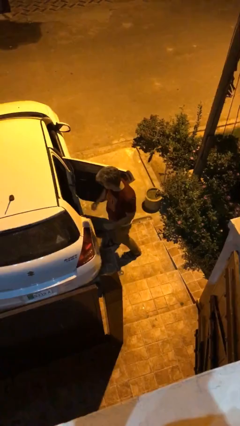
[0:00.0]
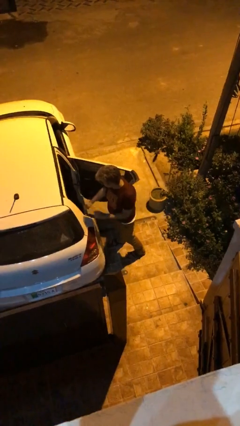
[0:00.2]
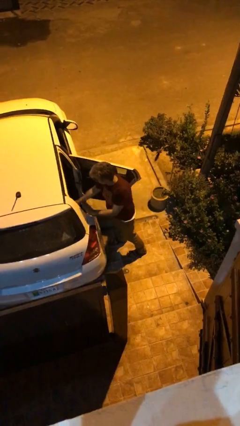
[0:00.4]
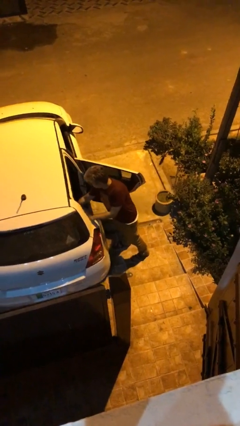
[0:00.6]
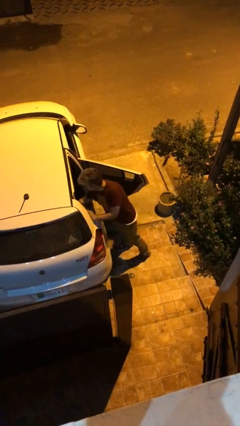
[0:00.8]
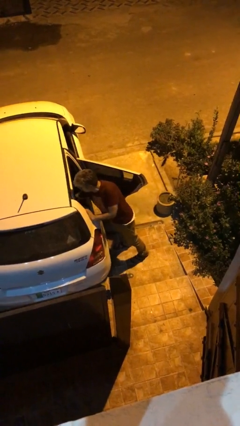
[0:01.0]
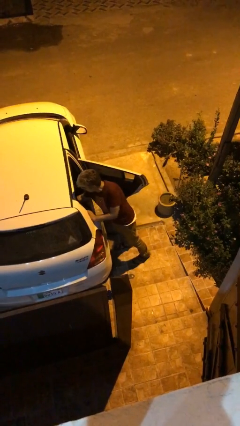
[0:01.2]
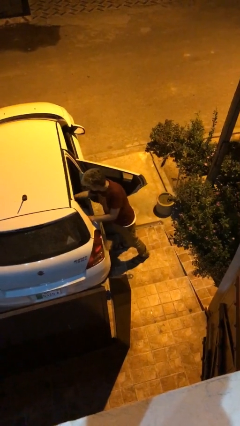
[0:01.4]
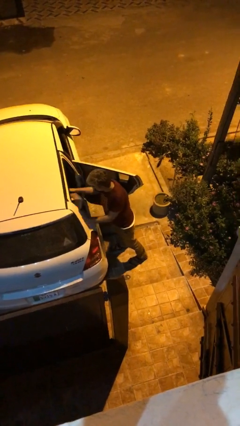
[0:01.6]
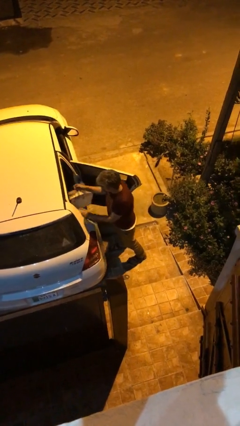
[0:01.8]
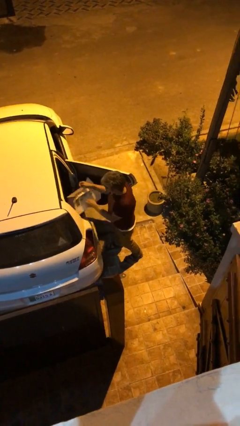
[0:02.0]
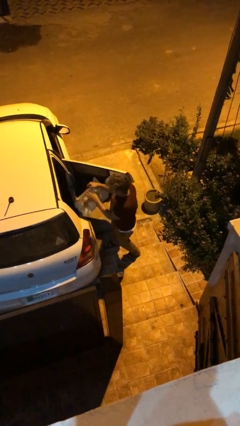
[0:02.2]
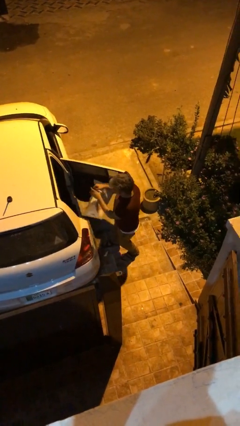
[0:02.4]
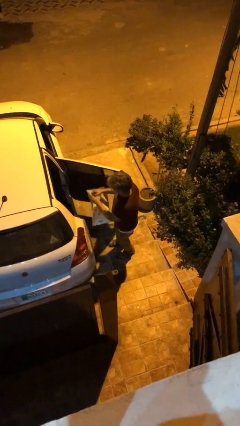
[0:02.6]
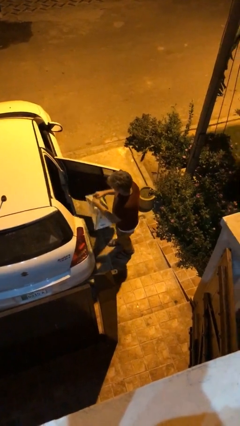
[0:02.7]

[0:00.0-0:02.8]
person unloads car

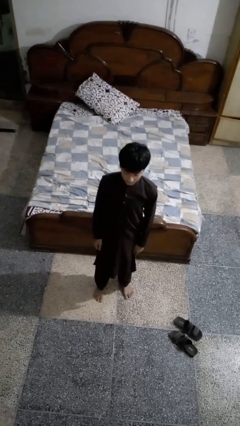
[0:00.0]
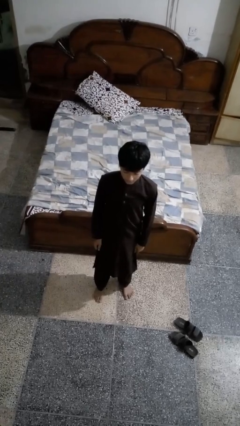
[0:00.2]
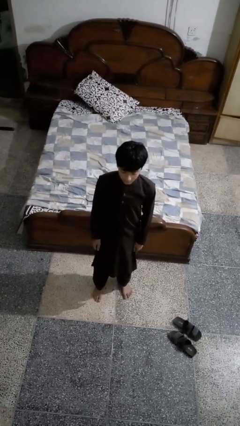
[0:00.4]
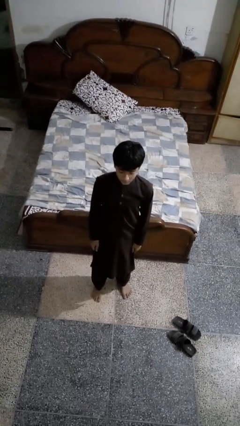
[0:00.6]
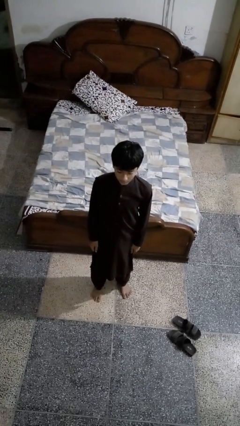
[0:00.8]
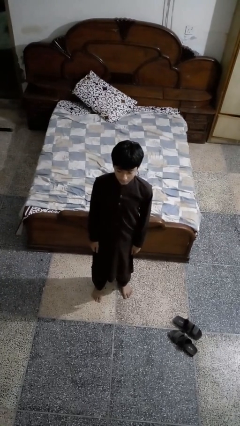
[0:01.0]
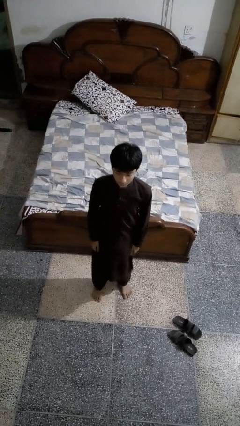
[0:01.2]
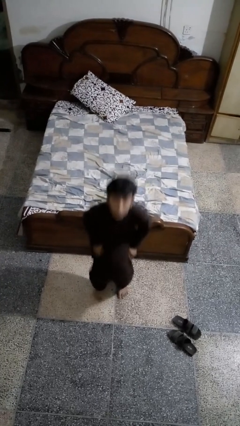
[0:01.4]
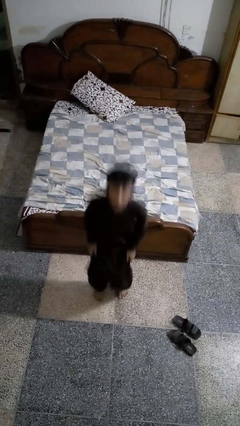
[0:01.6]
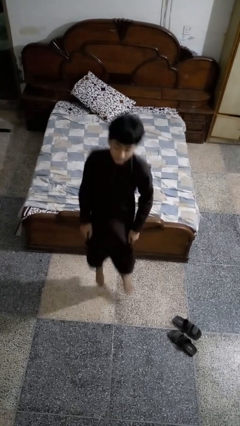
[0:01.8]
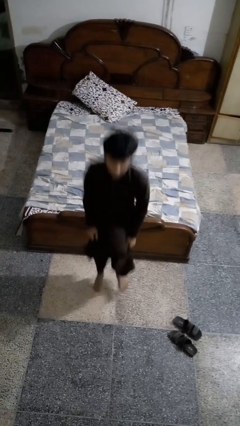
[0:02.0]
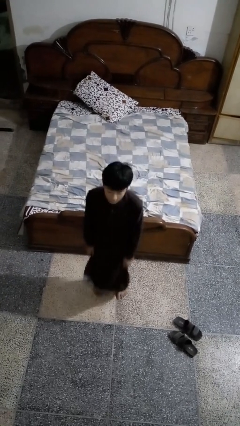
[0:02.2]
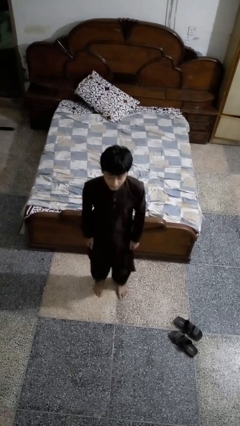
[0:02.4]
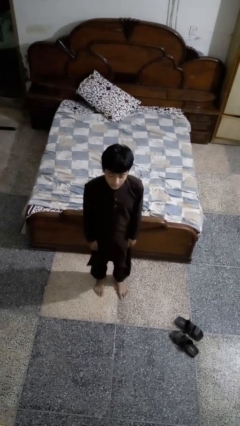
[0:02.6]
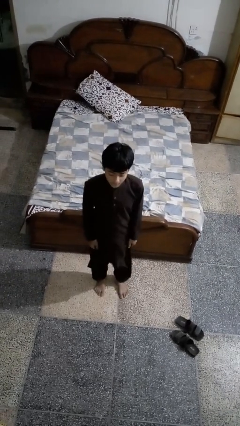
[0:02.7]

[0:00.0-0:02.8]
person jumps

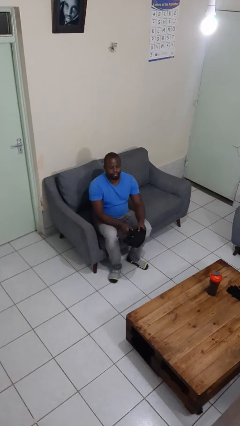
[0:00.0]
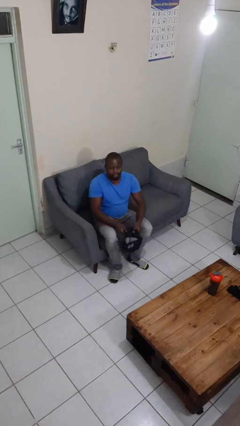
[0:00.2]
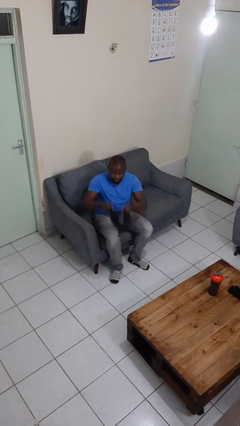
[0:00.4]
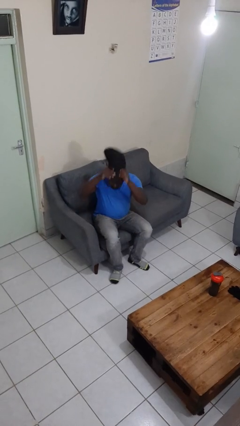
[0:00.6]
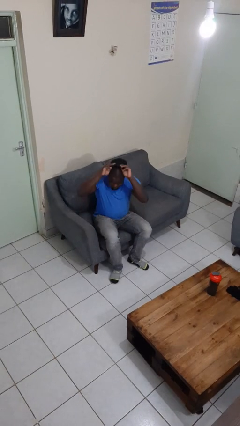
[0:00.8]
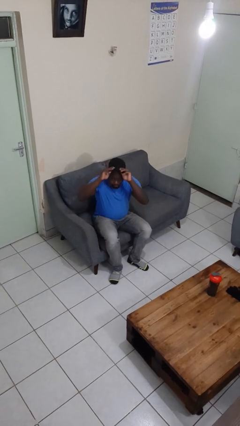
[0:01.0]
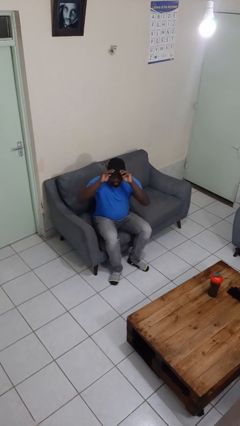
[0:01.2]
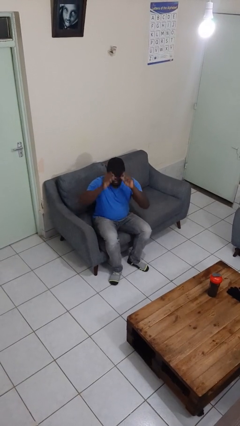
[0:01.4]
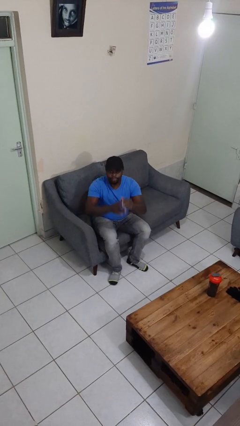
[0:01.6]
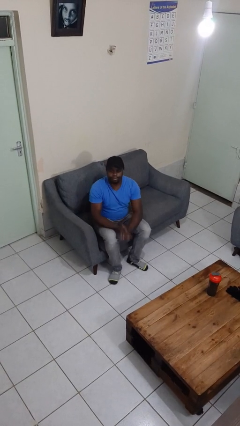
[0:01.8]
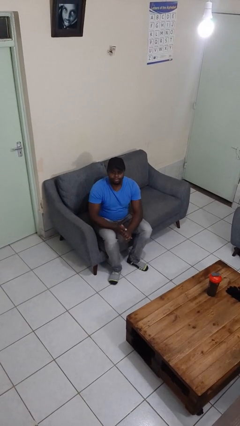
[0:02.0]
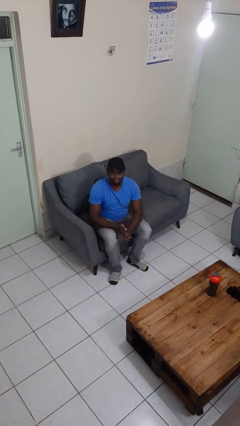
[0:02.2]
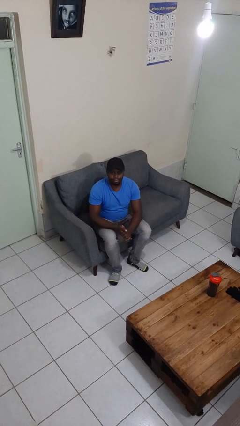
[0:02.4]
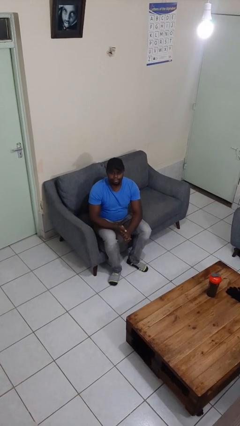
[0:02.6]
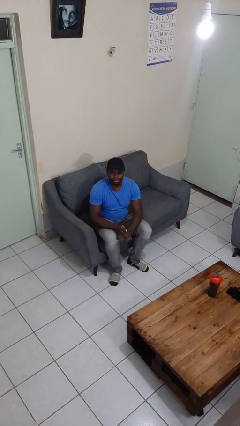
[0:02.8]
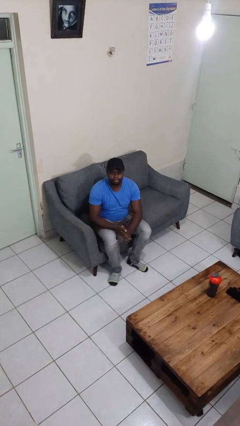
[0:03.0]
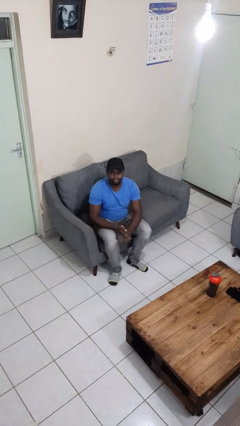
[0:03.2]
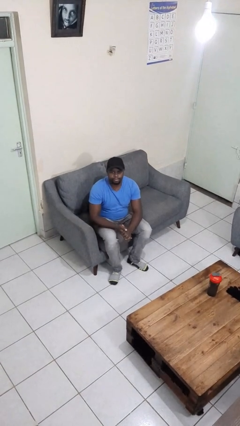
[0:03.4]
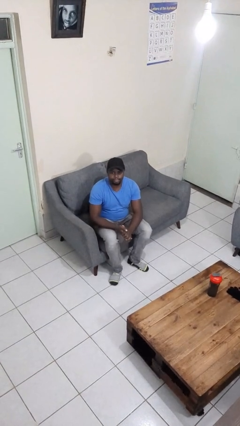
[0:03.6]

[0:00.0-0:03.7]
person puts on hat

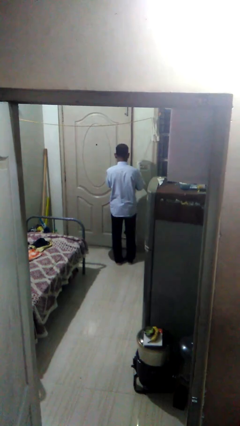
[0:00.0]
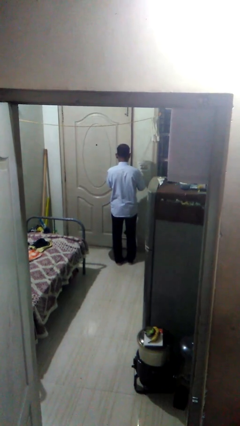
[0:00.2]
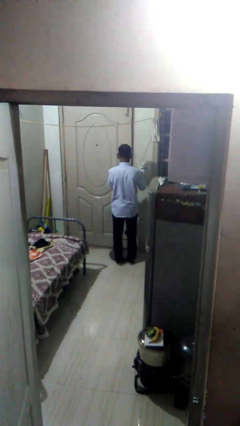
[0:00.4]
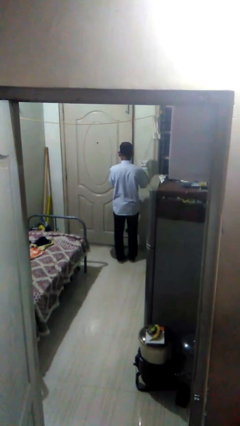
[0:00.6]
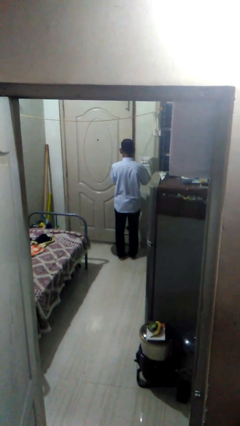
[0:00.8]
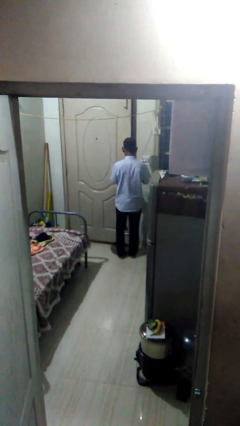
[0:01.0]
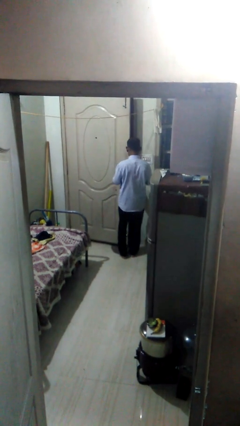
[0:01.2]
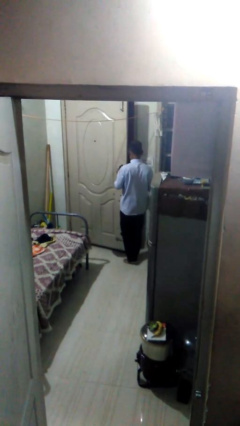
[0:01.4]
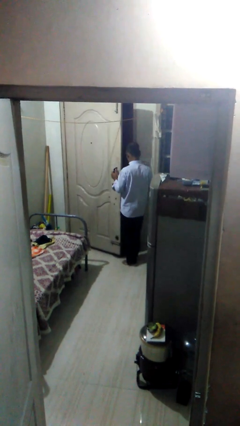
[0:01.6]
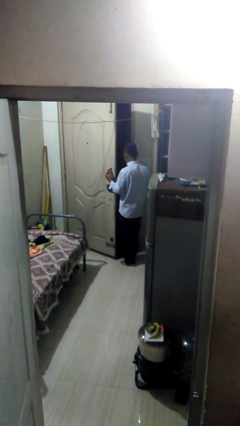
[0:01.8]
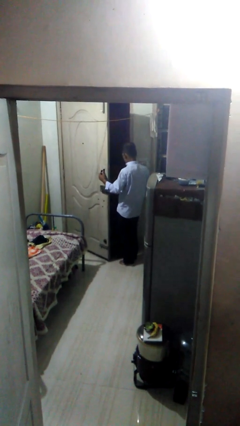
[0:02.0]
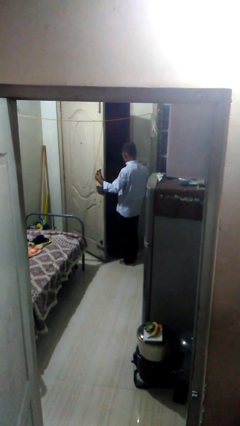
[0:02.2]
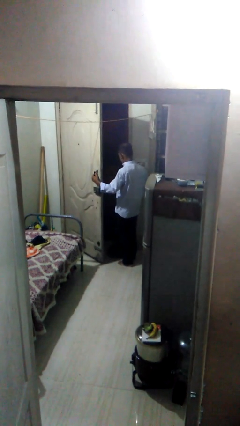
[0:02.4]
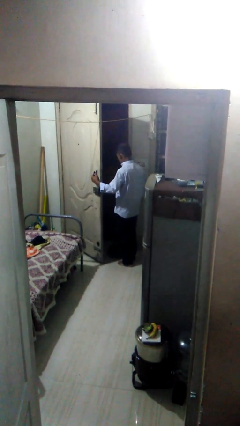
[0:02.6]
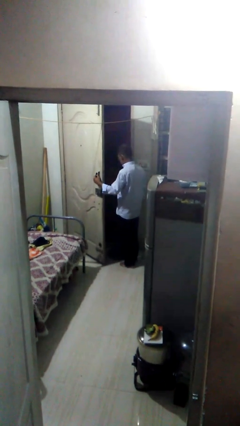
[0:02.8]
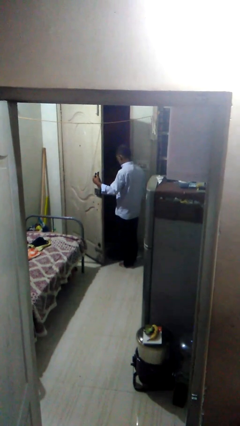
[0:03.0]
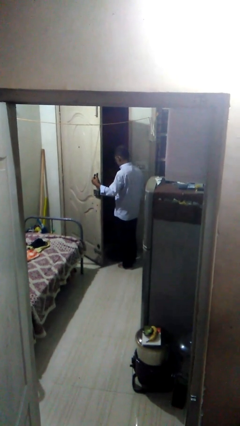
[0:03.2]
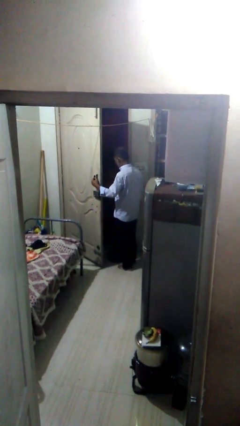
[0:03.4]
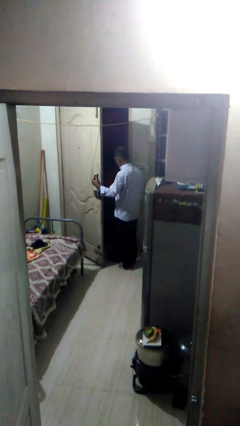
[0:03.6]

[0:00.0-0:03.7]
person opens facility door

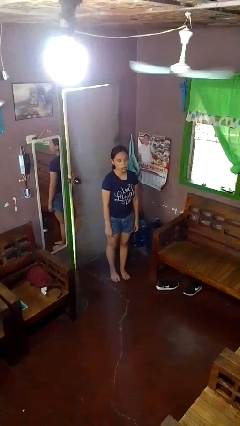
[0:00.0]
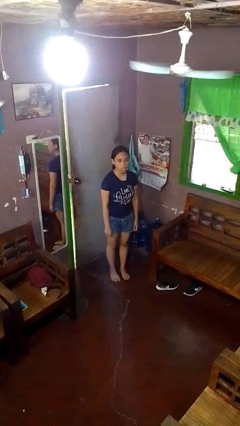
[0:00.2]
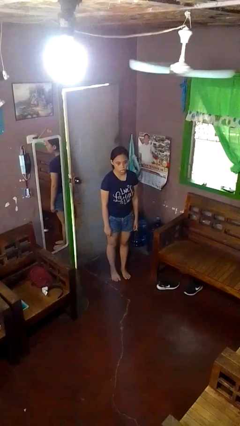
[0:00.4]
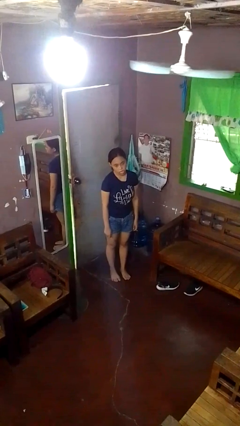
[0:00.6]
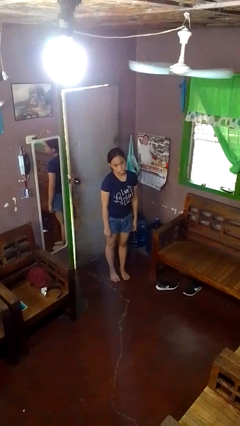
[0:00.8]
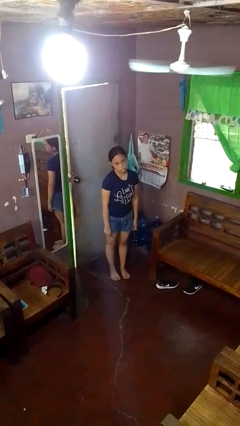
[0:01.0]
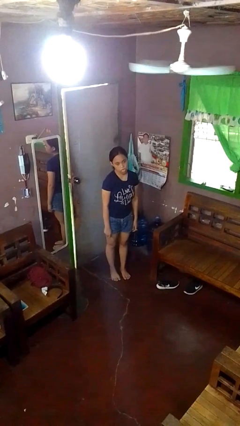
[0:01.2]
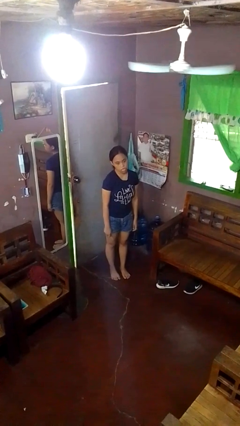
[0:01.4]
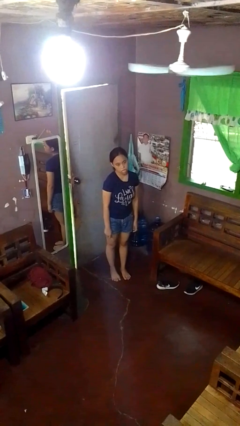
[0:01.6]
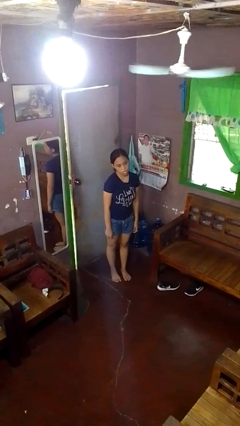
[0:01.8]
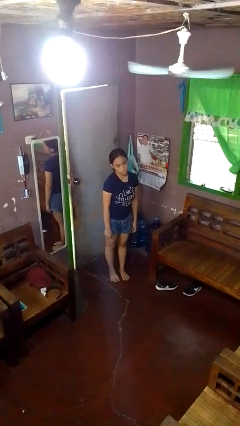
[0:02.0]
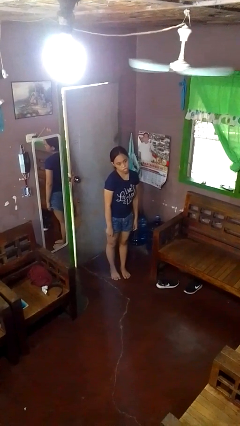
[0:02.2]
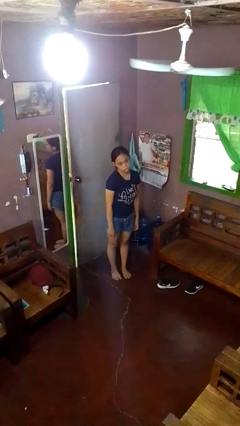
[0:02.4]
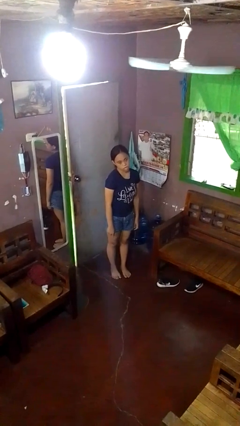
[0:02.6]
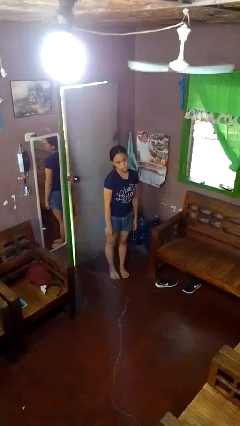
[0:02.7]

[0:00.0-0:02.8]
person sticks out tongue

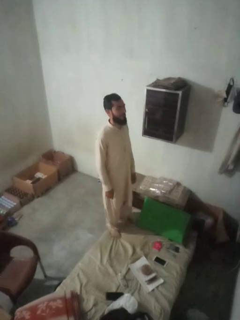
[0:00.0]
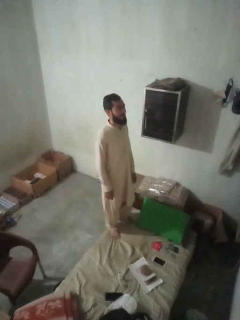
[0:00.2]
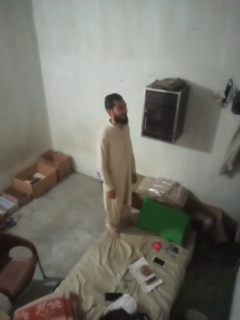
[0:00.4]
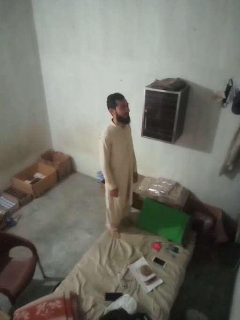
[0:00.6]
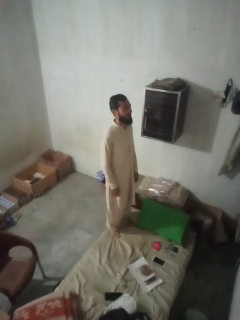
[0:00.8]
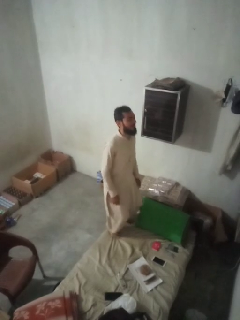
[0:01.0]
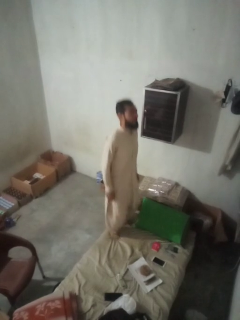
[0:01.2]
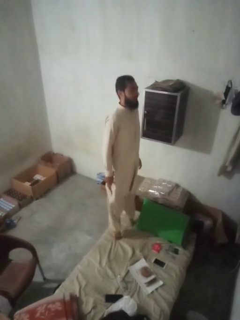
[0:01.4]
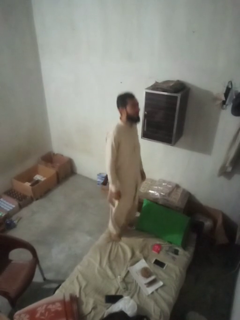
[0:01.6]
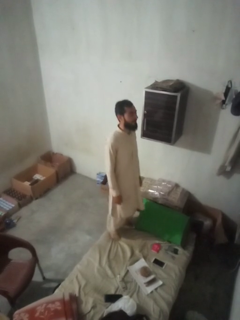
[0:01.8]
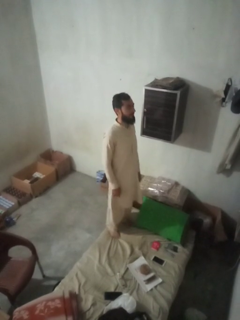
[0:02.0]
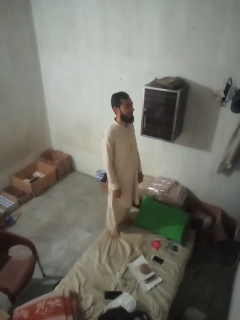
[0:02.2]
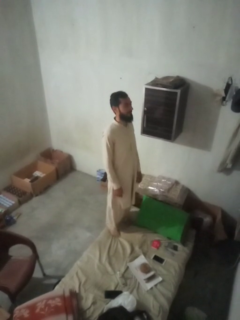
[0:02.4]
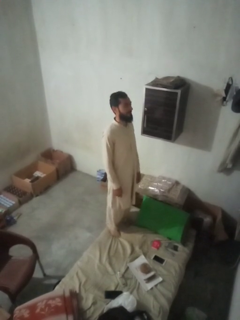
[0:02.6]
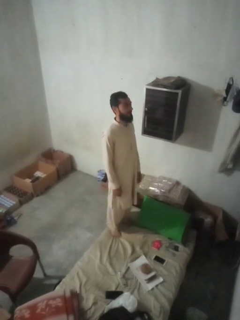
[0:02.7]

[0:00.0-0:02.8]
person jumps on couch
